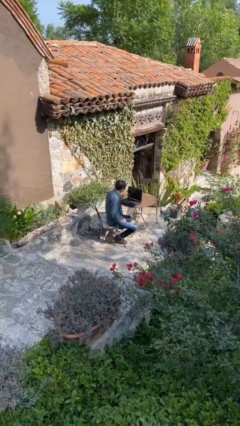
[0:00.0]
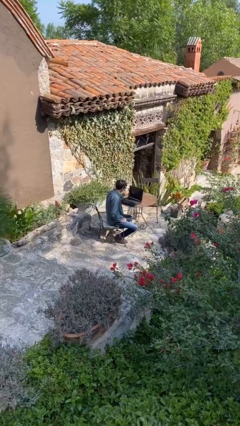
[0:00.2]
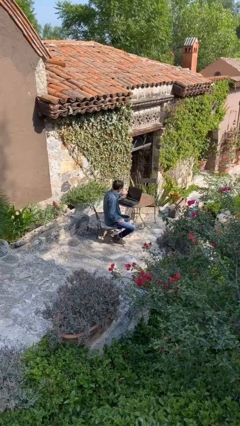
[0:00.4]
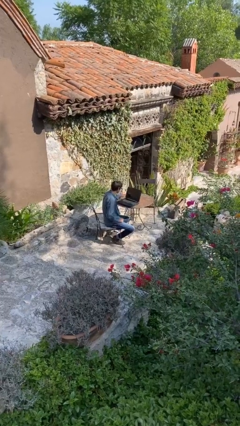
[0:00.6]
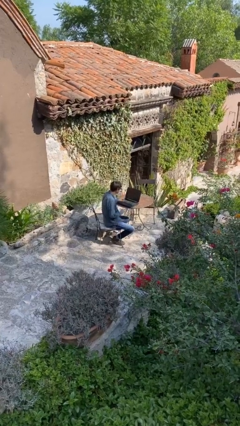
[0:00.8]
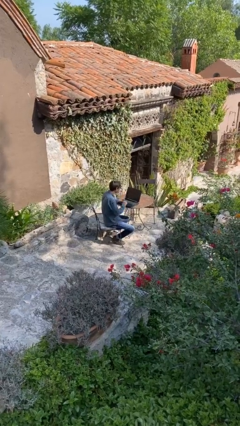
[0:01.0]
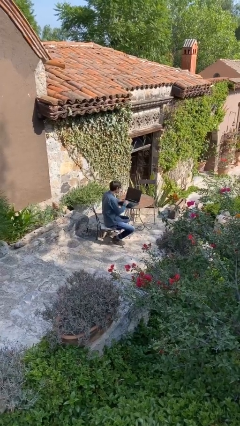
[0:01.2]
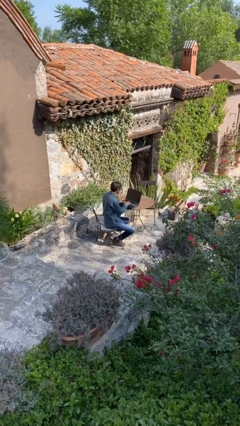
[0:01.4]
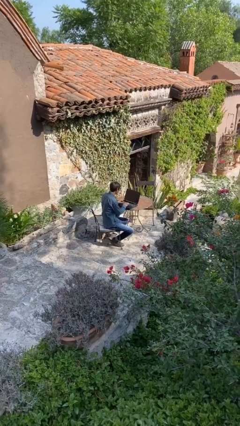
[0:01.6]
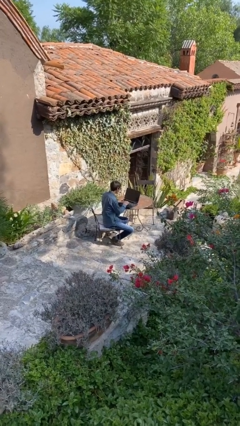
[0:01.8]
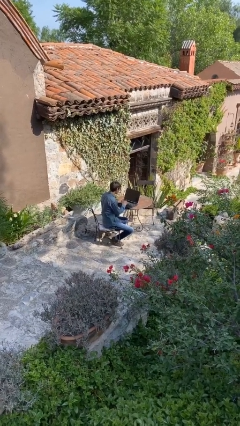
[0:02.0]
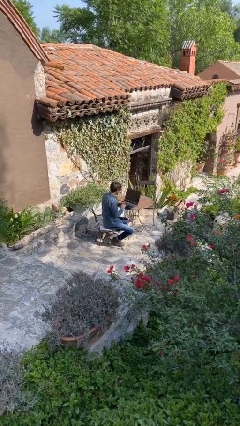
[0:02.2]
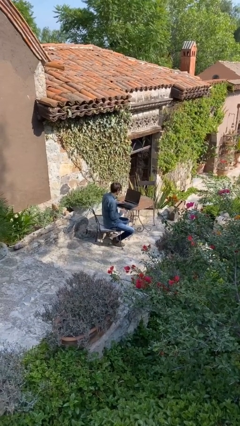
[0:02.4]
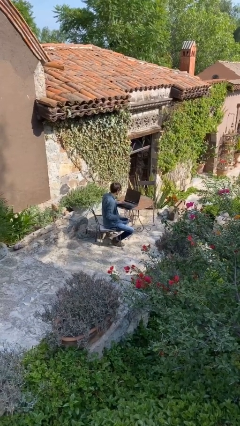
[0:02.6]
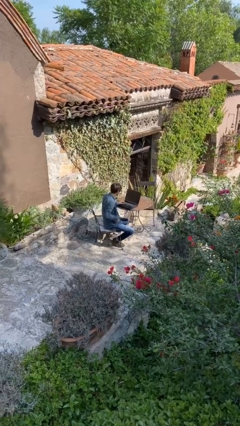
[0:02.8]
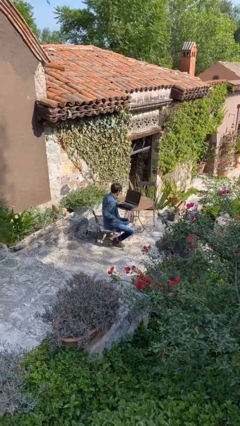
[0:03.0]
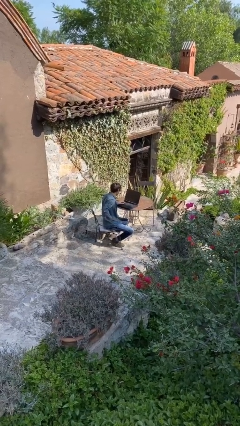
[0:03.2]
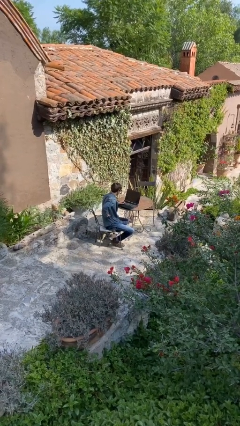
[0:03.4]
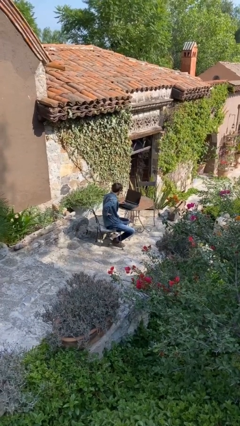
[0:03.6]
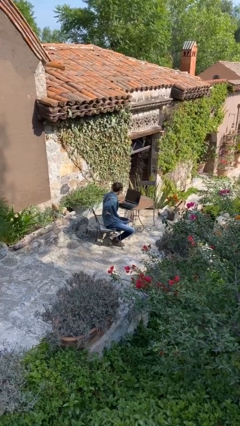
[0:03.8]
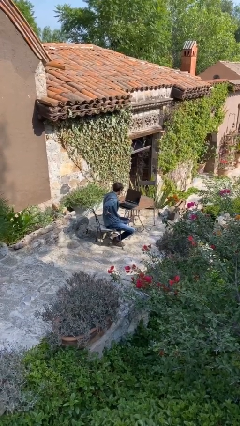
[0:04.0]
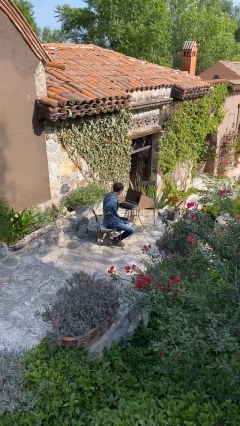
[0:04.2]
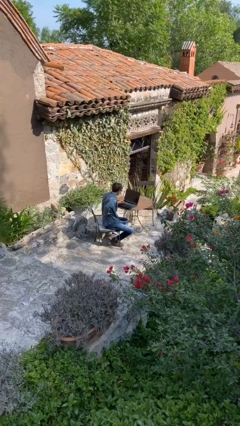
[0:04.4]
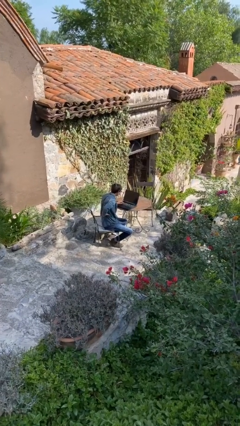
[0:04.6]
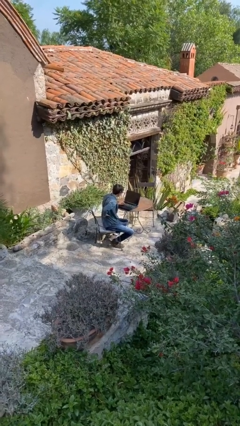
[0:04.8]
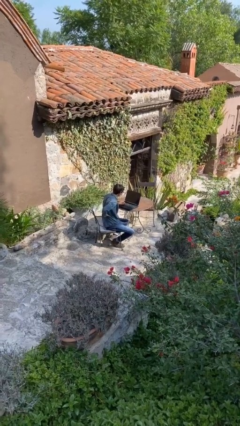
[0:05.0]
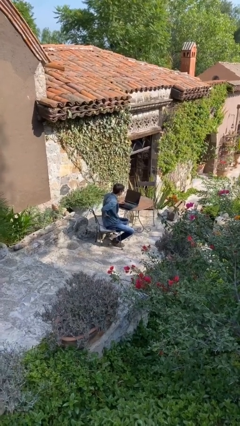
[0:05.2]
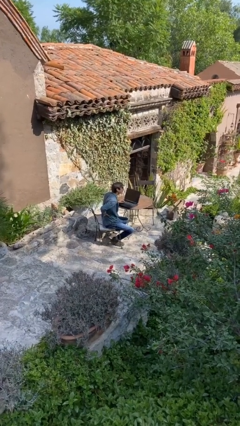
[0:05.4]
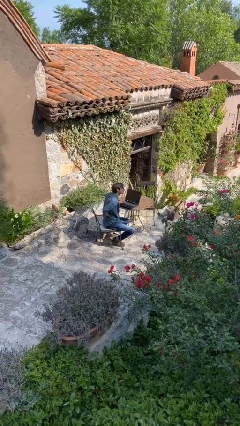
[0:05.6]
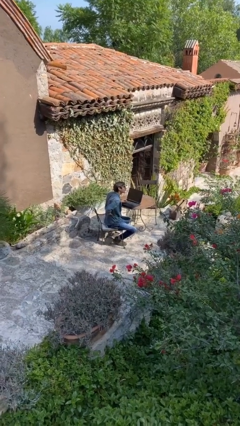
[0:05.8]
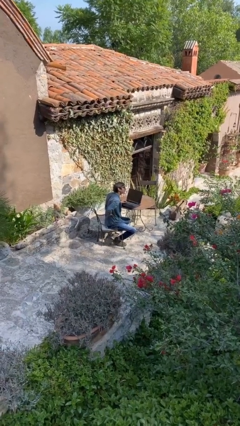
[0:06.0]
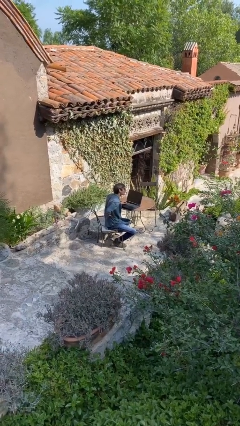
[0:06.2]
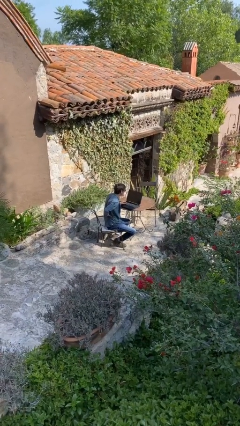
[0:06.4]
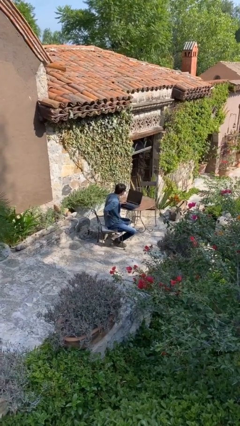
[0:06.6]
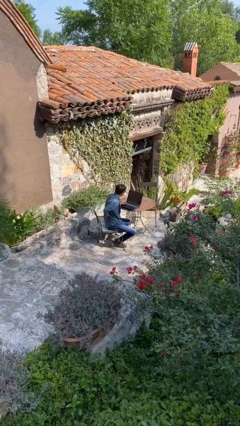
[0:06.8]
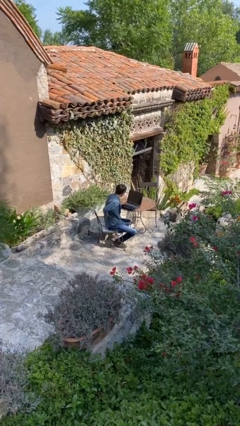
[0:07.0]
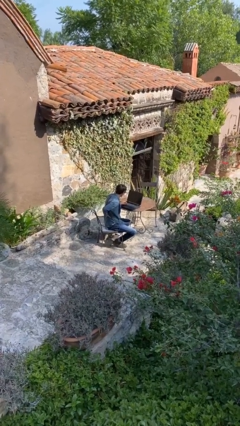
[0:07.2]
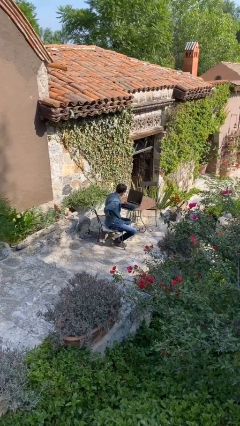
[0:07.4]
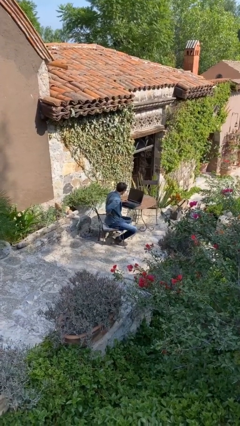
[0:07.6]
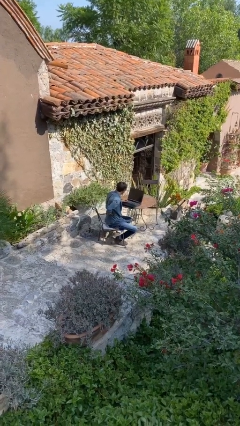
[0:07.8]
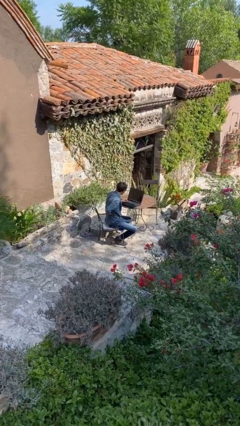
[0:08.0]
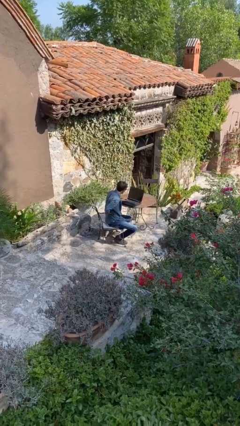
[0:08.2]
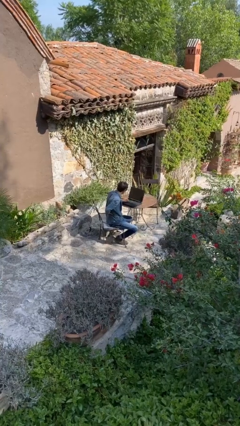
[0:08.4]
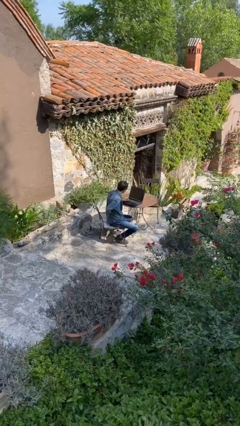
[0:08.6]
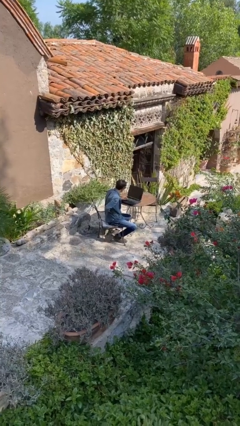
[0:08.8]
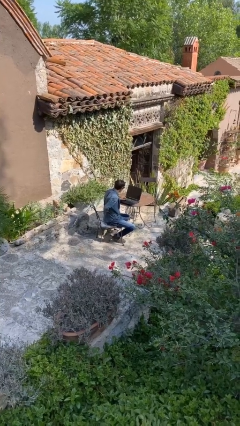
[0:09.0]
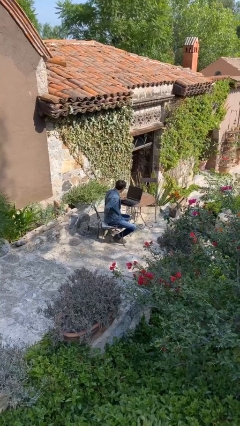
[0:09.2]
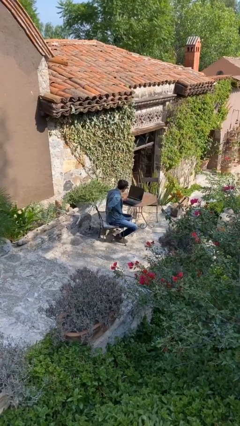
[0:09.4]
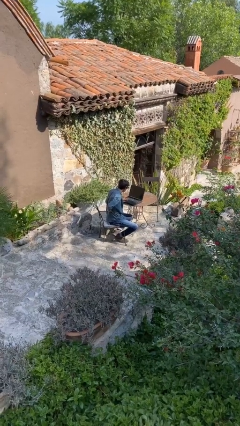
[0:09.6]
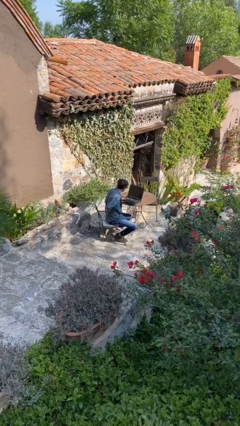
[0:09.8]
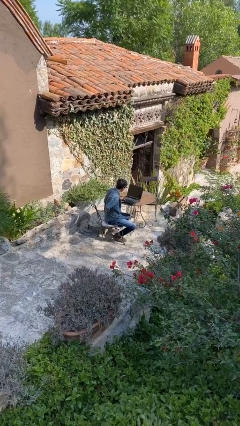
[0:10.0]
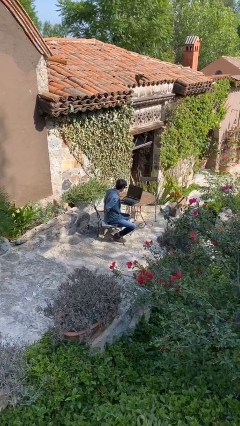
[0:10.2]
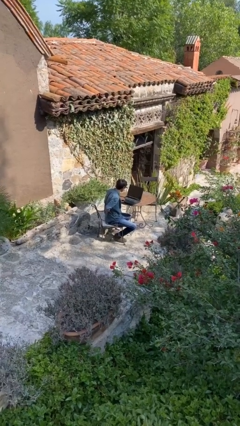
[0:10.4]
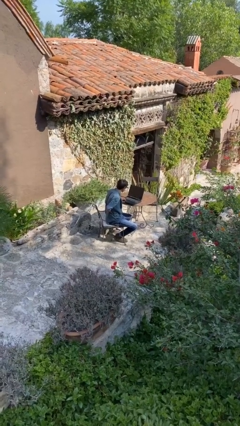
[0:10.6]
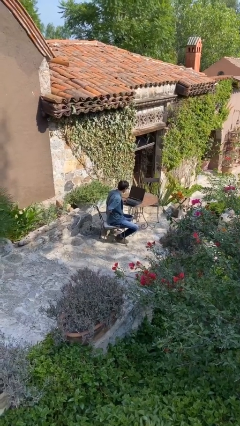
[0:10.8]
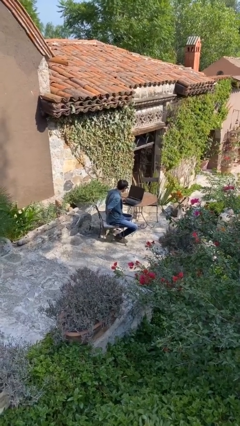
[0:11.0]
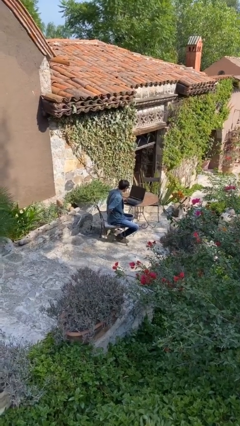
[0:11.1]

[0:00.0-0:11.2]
person interacts with laptop

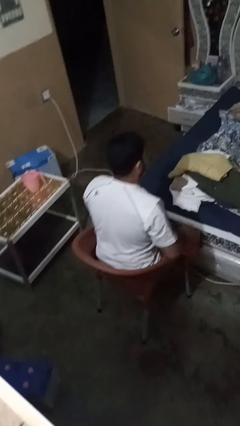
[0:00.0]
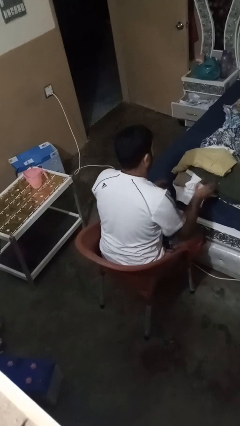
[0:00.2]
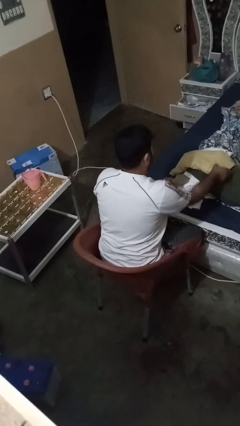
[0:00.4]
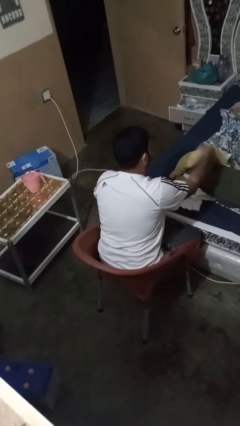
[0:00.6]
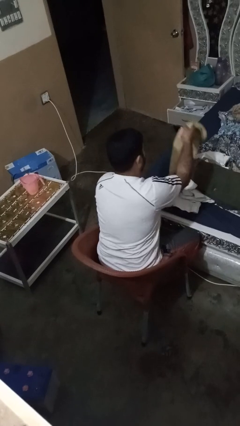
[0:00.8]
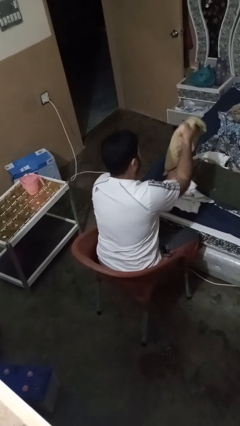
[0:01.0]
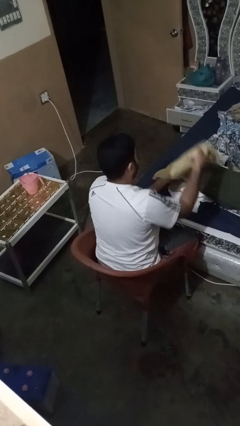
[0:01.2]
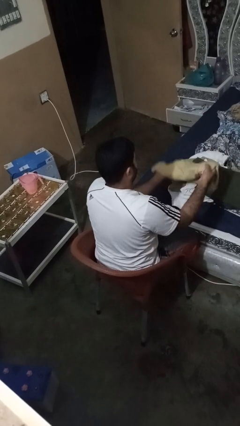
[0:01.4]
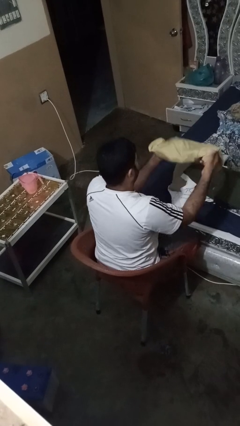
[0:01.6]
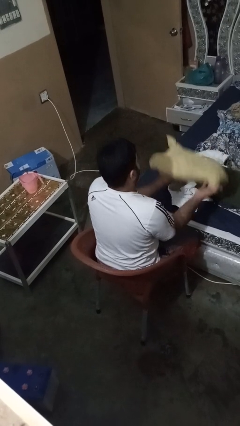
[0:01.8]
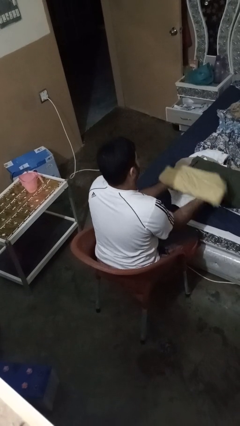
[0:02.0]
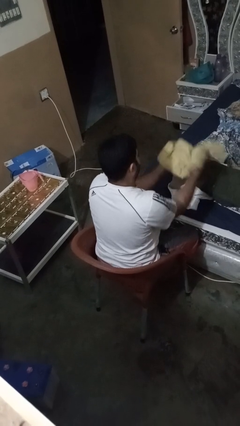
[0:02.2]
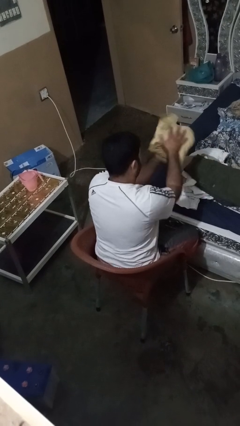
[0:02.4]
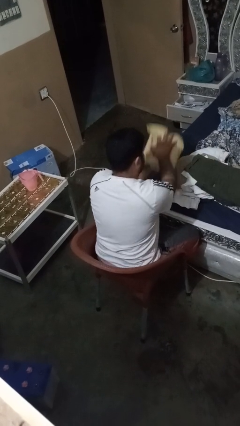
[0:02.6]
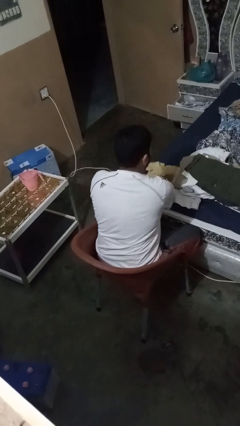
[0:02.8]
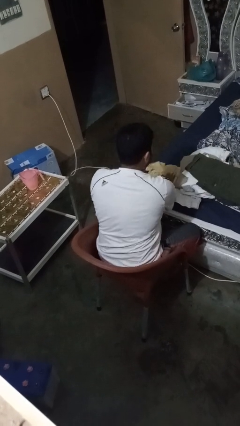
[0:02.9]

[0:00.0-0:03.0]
person folds shirt

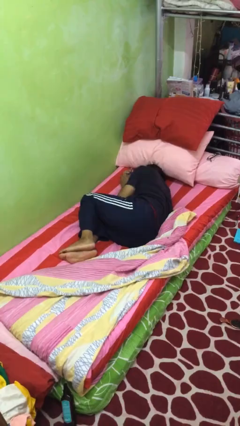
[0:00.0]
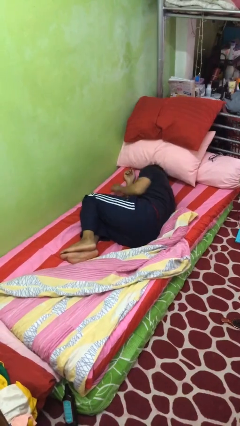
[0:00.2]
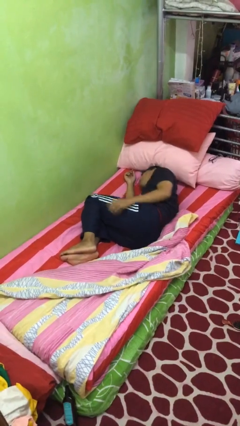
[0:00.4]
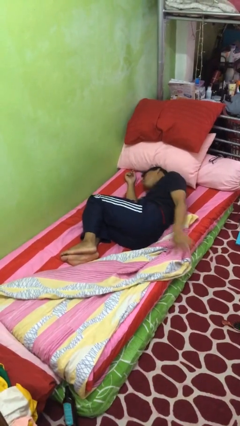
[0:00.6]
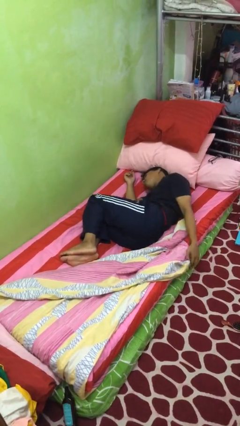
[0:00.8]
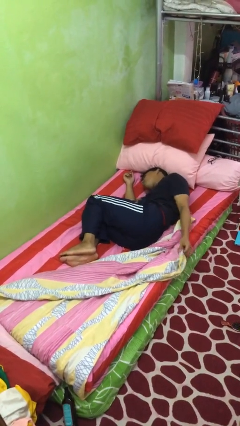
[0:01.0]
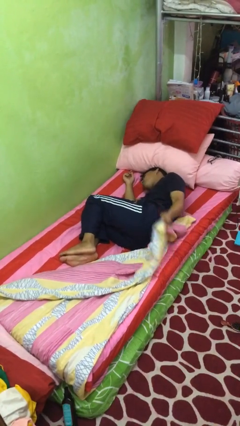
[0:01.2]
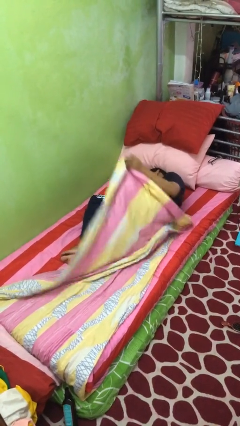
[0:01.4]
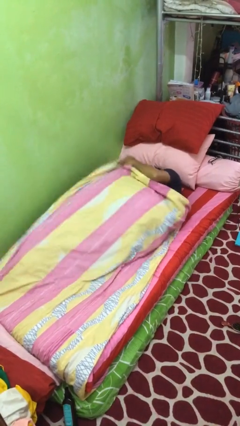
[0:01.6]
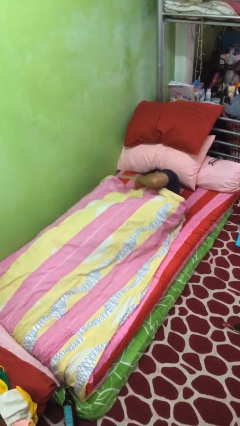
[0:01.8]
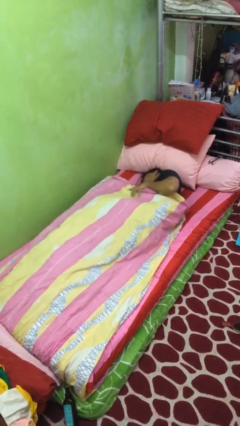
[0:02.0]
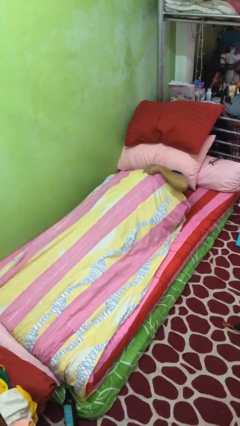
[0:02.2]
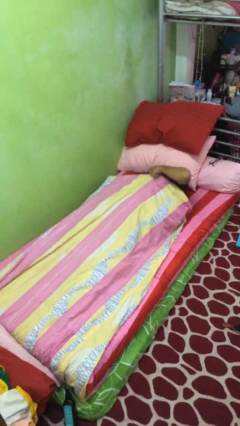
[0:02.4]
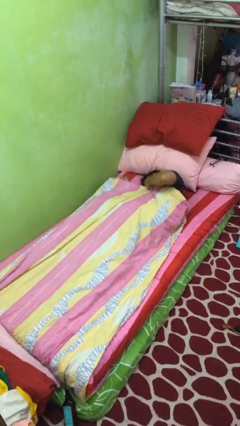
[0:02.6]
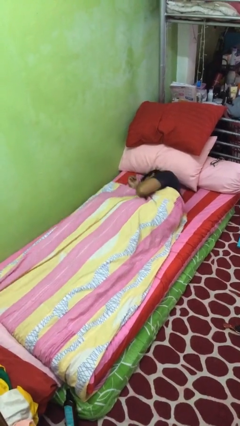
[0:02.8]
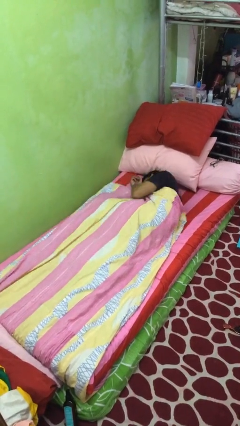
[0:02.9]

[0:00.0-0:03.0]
person covers with bedsheets

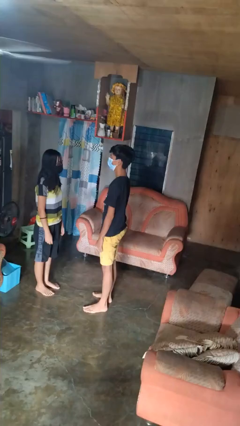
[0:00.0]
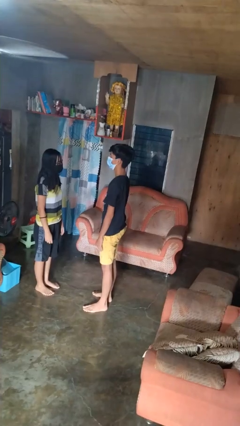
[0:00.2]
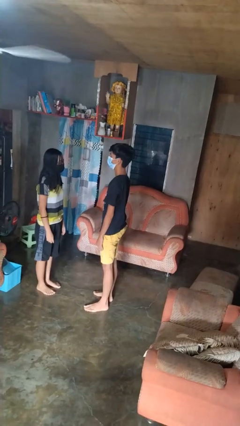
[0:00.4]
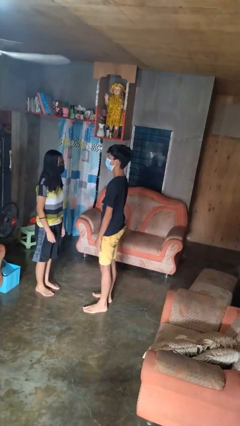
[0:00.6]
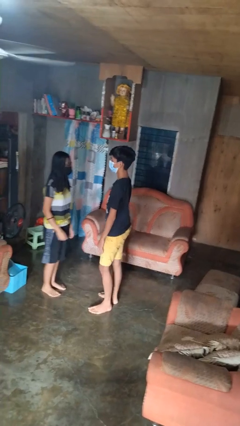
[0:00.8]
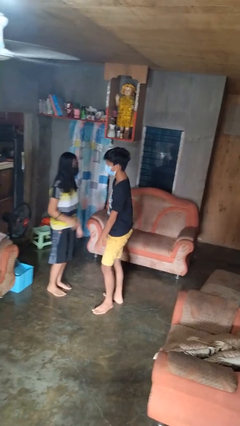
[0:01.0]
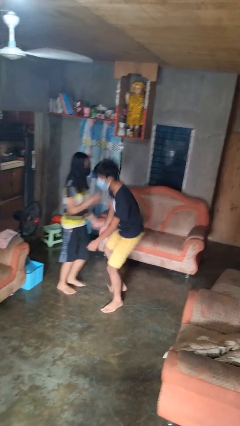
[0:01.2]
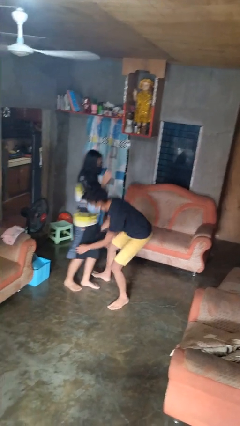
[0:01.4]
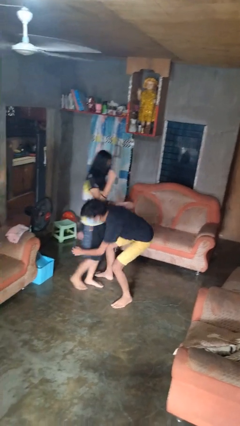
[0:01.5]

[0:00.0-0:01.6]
person carries person over shoulder
